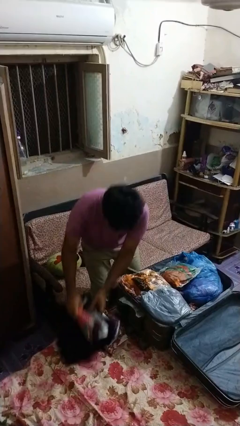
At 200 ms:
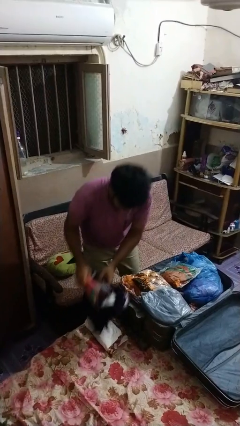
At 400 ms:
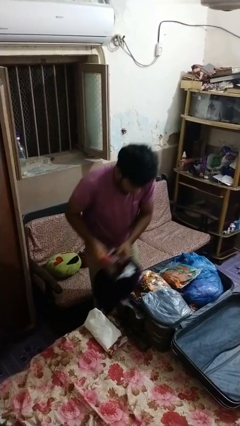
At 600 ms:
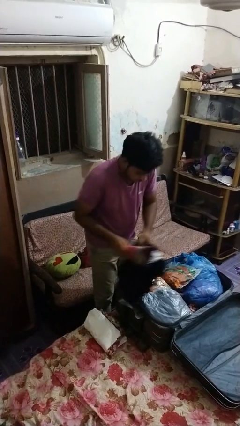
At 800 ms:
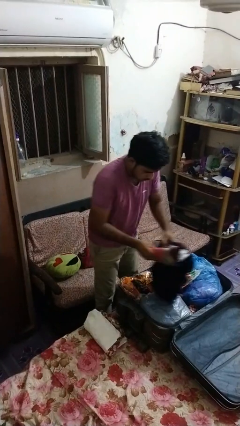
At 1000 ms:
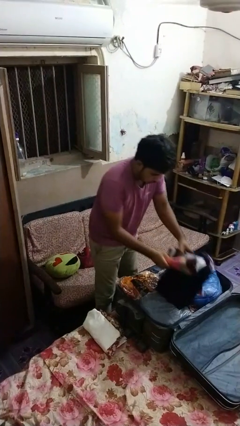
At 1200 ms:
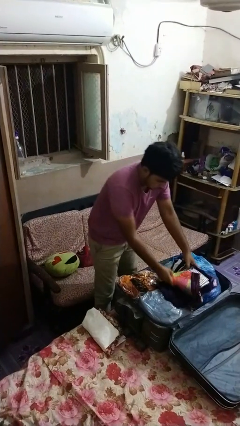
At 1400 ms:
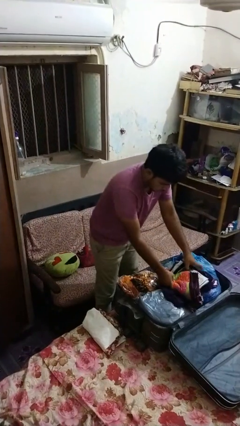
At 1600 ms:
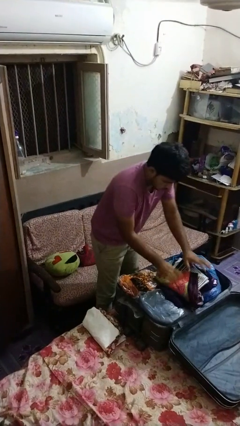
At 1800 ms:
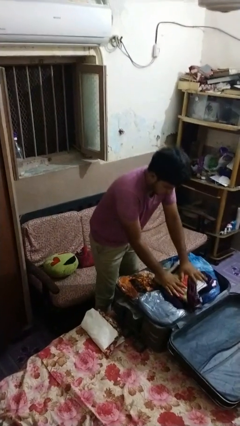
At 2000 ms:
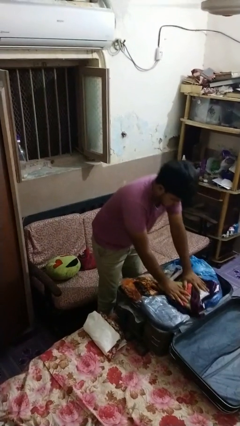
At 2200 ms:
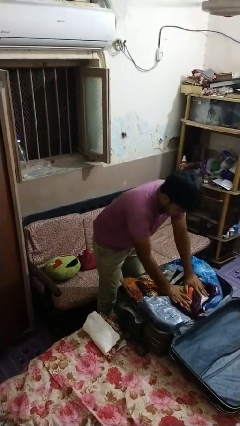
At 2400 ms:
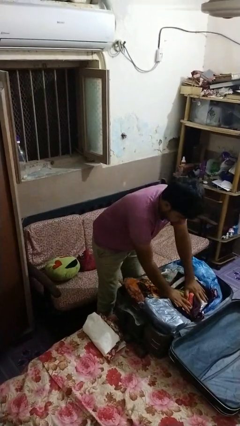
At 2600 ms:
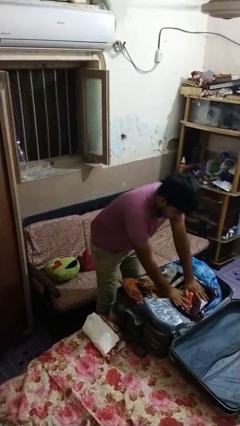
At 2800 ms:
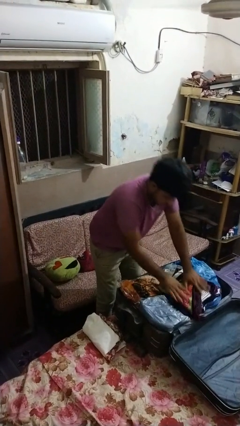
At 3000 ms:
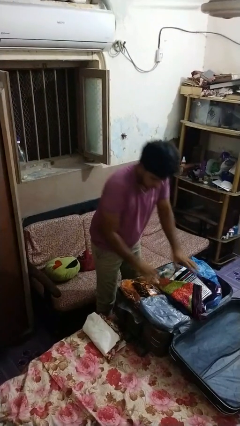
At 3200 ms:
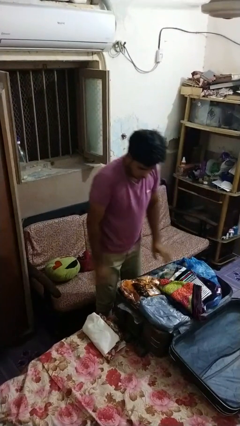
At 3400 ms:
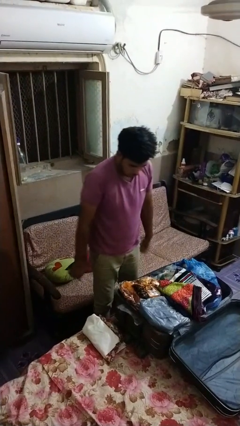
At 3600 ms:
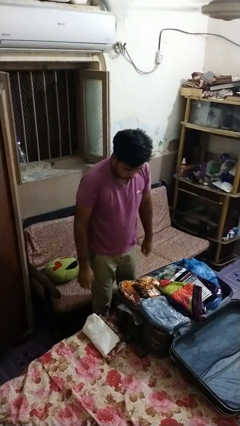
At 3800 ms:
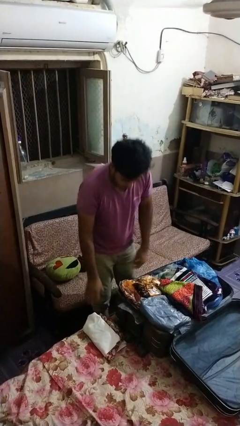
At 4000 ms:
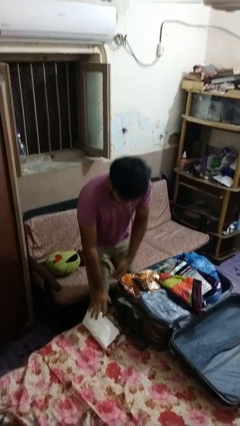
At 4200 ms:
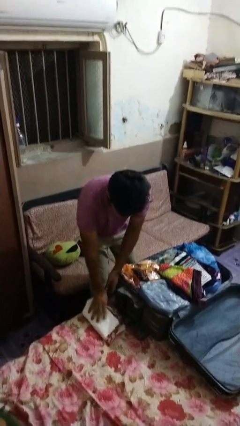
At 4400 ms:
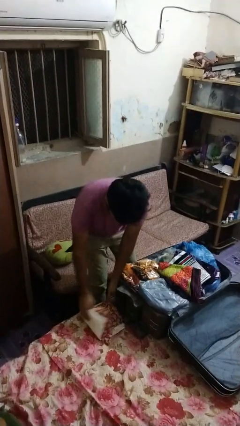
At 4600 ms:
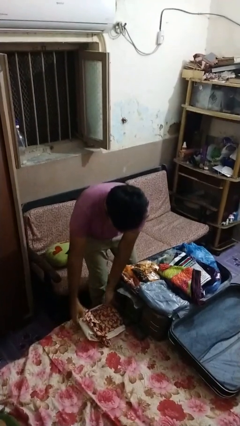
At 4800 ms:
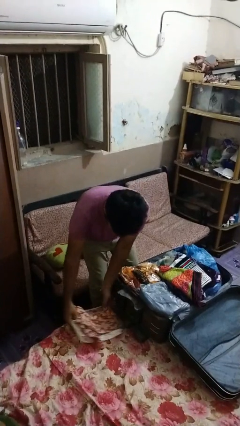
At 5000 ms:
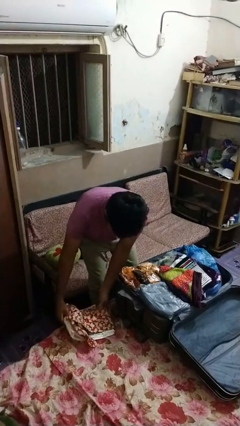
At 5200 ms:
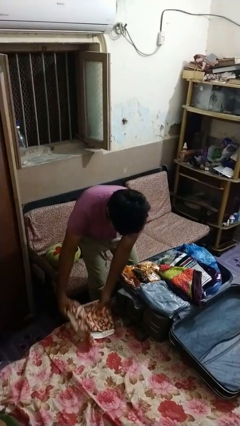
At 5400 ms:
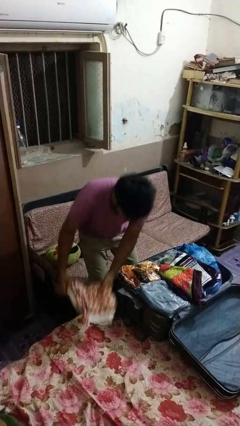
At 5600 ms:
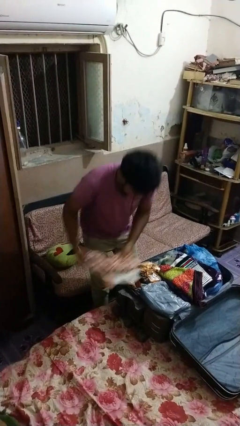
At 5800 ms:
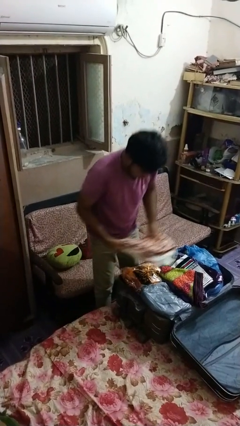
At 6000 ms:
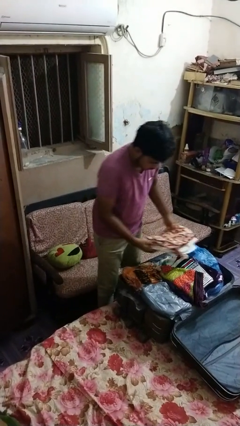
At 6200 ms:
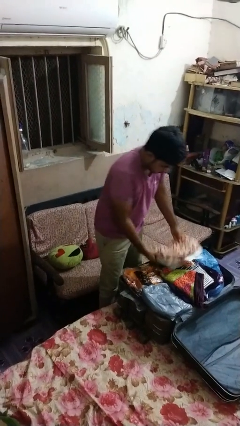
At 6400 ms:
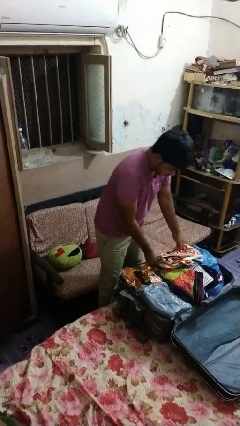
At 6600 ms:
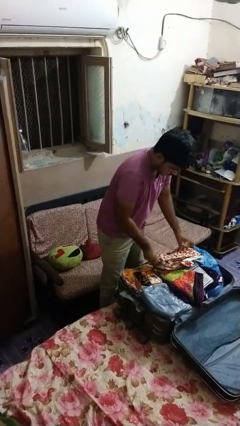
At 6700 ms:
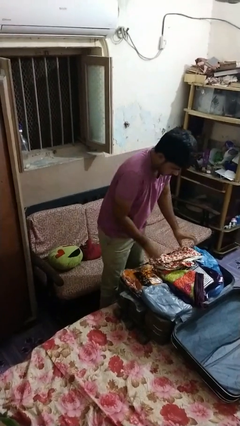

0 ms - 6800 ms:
person loads clothes into suitcase

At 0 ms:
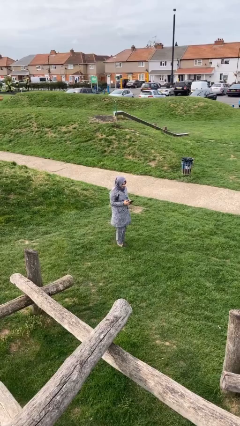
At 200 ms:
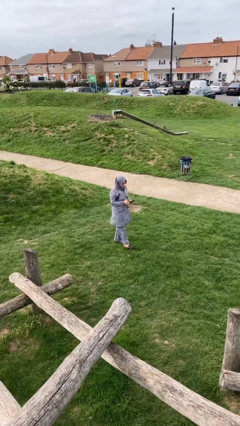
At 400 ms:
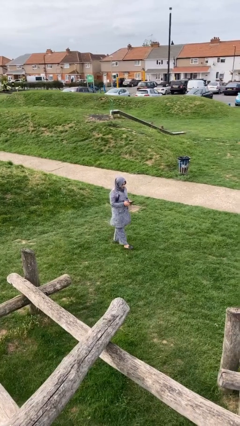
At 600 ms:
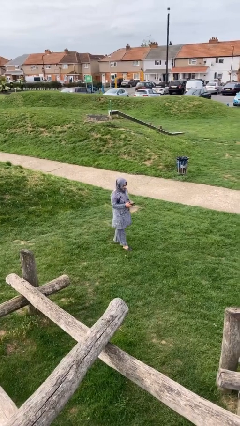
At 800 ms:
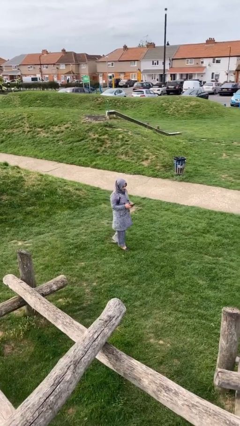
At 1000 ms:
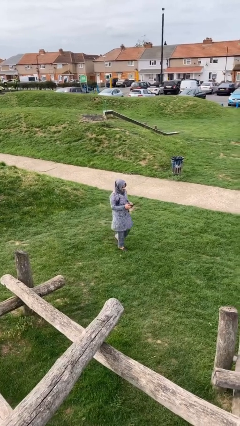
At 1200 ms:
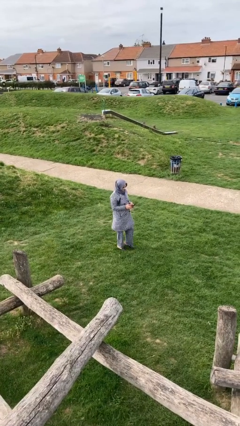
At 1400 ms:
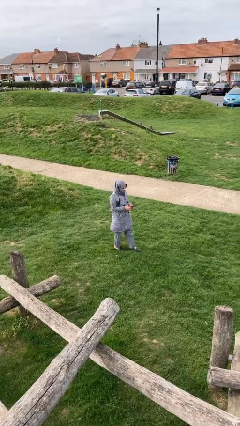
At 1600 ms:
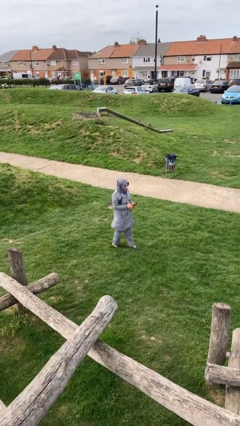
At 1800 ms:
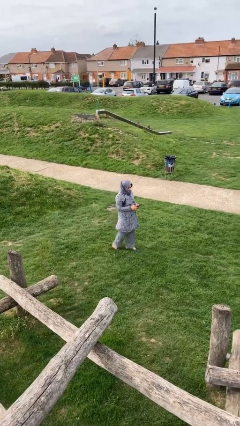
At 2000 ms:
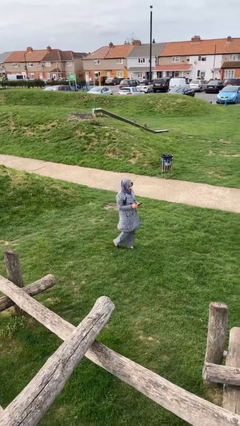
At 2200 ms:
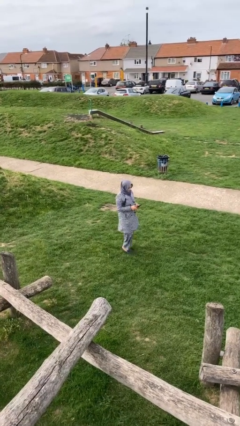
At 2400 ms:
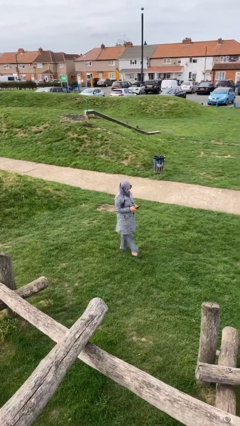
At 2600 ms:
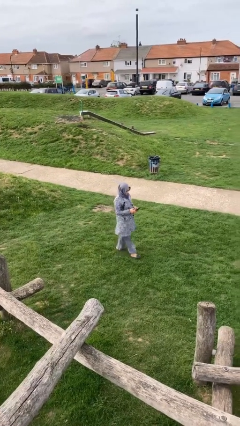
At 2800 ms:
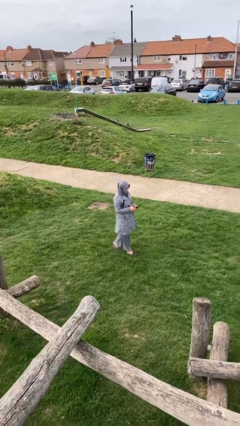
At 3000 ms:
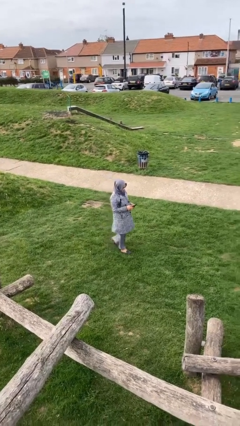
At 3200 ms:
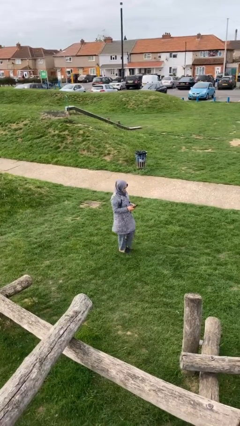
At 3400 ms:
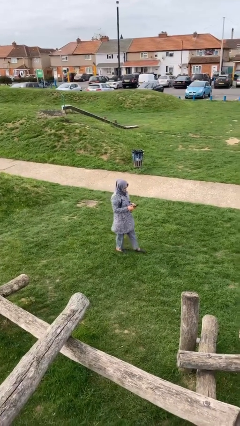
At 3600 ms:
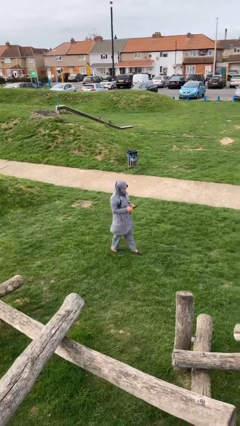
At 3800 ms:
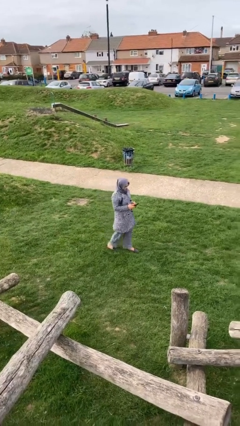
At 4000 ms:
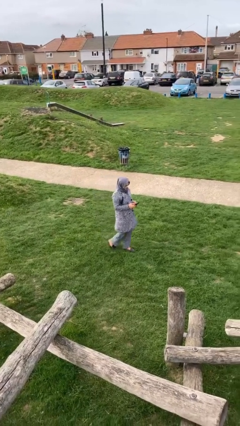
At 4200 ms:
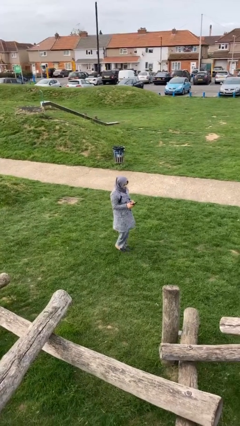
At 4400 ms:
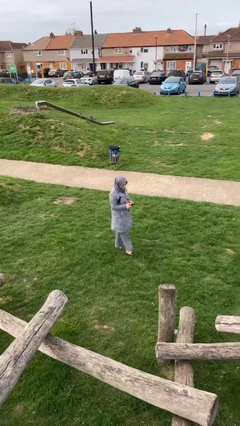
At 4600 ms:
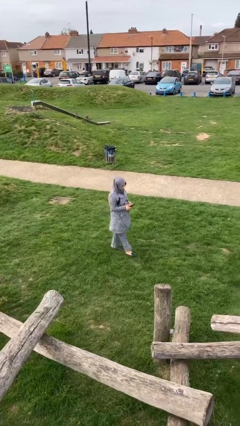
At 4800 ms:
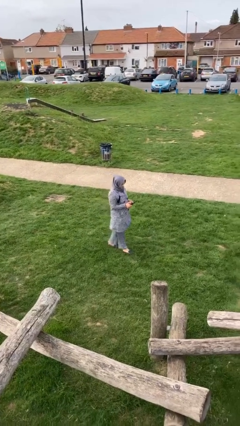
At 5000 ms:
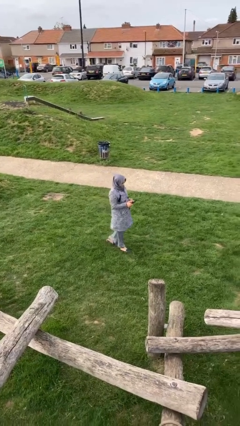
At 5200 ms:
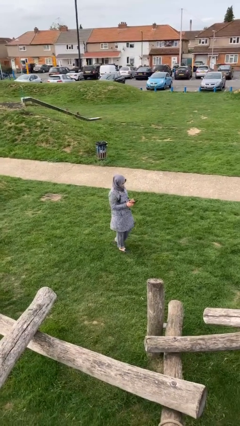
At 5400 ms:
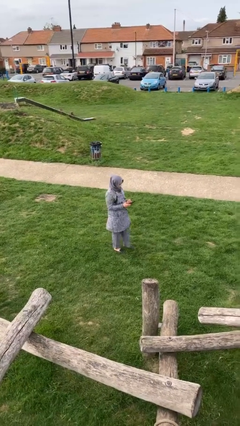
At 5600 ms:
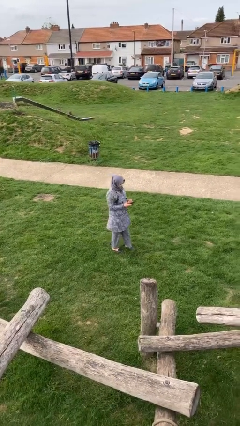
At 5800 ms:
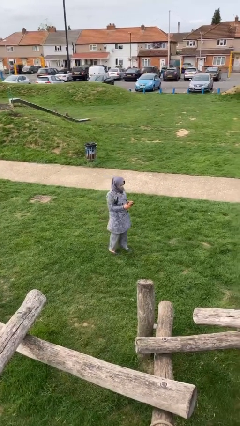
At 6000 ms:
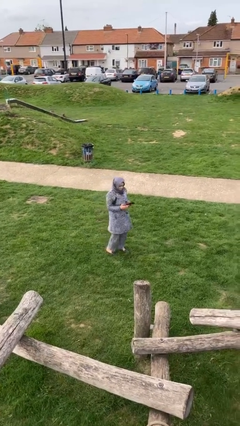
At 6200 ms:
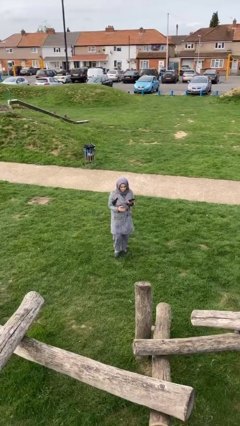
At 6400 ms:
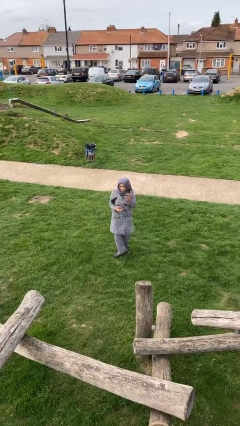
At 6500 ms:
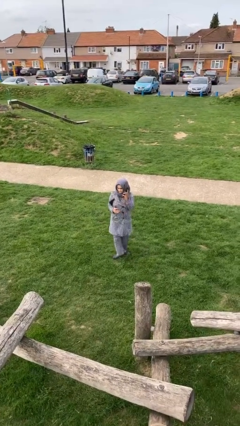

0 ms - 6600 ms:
person texts on phone

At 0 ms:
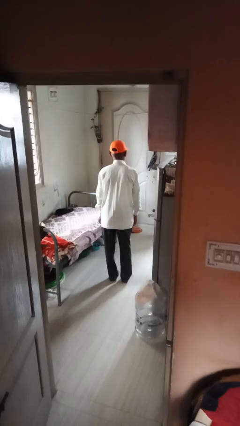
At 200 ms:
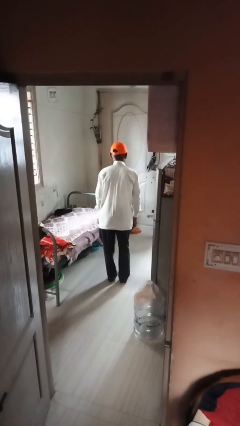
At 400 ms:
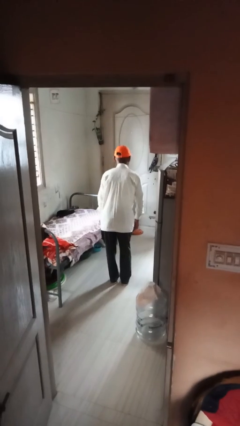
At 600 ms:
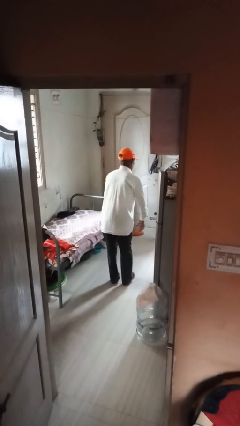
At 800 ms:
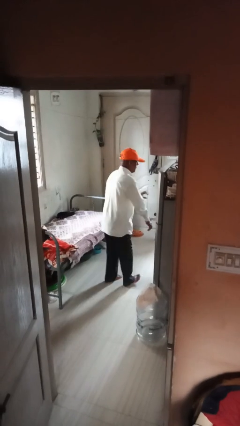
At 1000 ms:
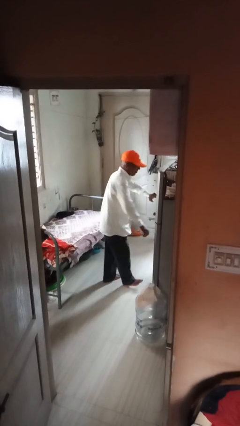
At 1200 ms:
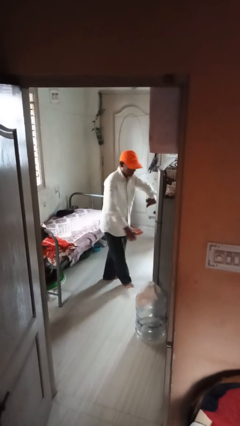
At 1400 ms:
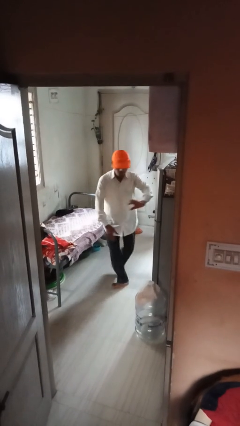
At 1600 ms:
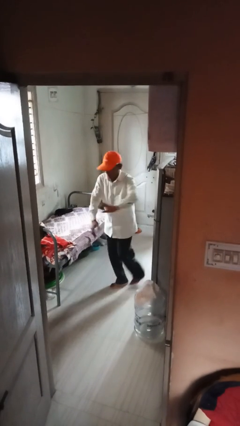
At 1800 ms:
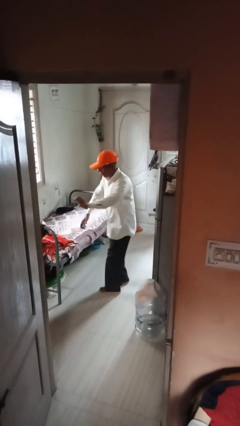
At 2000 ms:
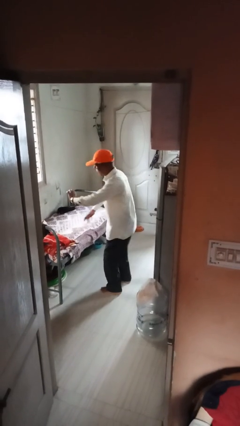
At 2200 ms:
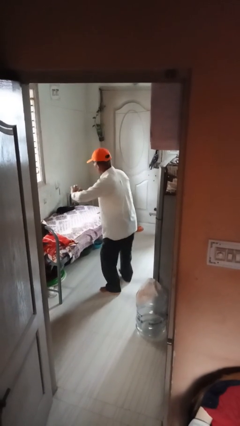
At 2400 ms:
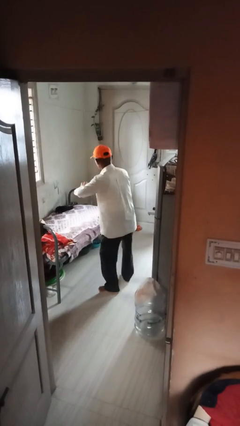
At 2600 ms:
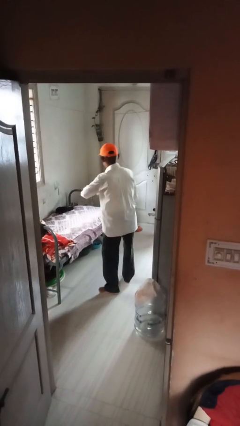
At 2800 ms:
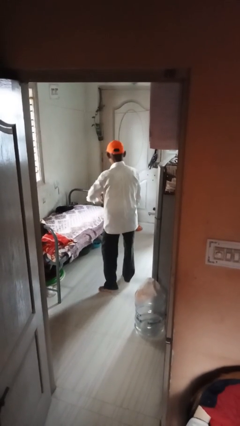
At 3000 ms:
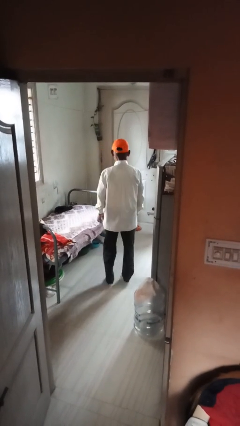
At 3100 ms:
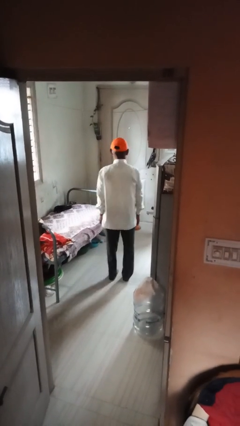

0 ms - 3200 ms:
person twirls

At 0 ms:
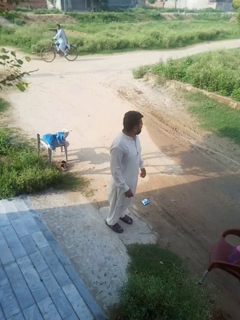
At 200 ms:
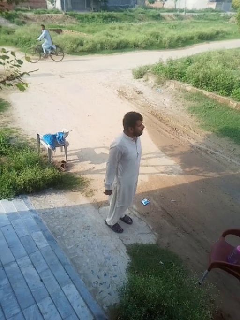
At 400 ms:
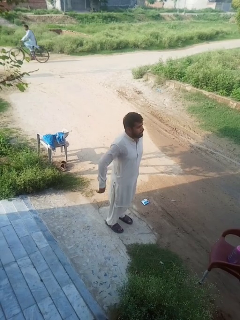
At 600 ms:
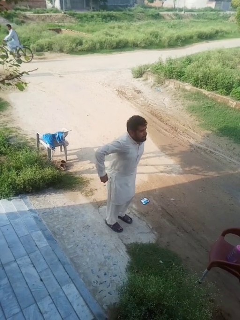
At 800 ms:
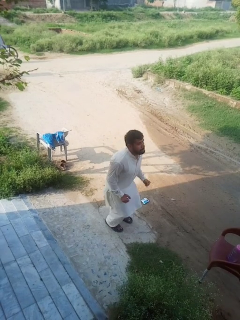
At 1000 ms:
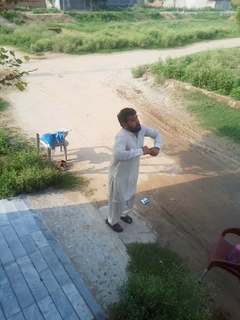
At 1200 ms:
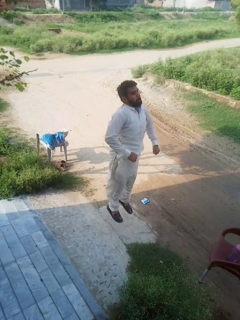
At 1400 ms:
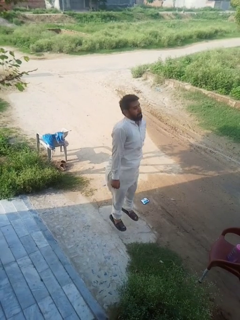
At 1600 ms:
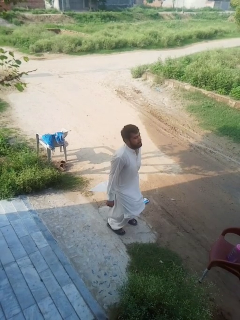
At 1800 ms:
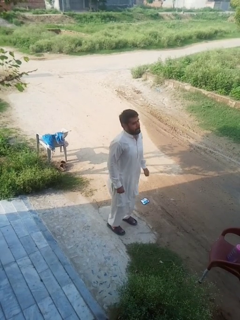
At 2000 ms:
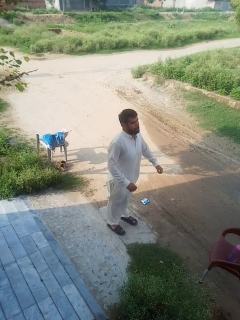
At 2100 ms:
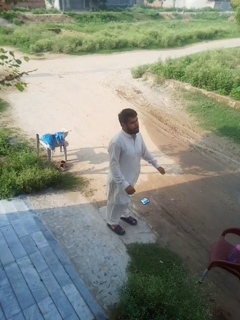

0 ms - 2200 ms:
person jumps
